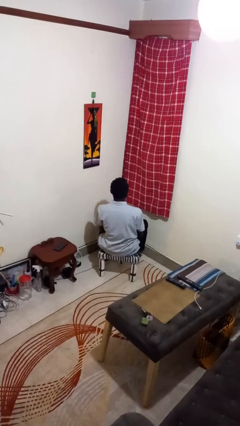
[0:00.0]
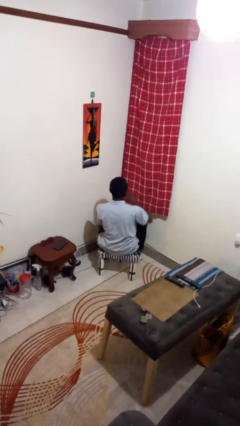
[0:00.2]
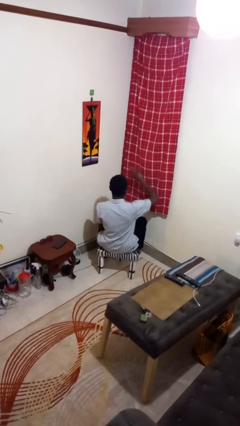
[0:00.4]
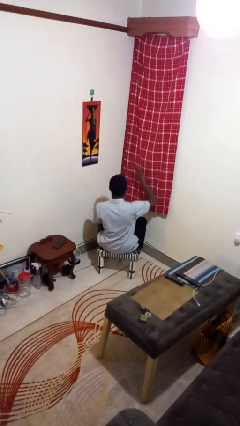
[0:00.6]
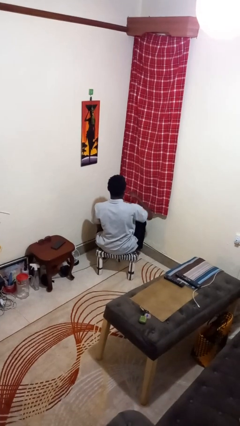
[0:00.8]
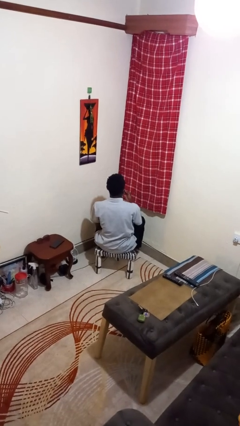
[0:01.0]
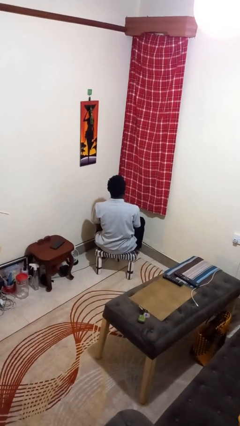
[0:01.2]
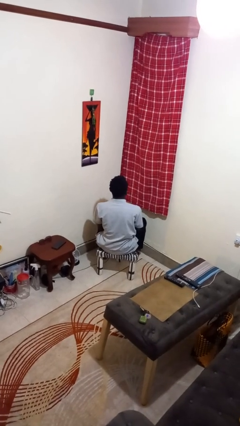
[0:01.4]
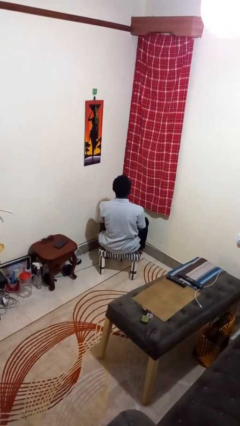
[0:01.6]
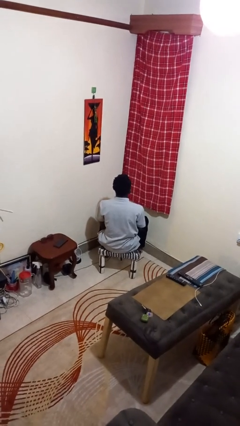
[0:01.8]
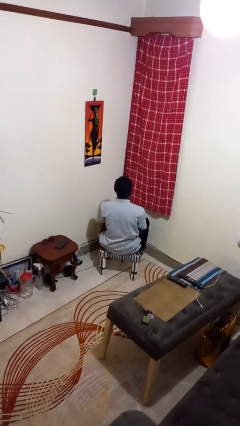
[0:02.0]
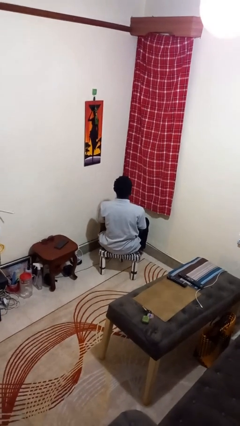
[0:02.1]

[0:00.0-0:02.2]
person gestures swipe down

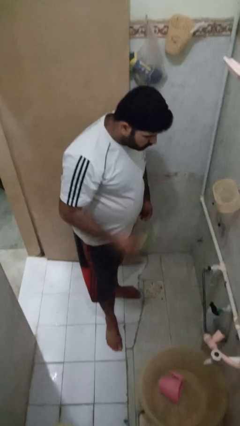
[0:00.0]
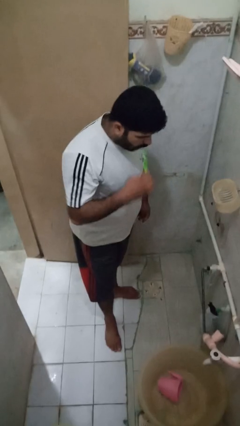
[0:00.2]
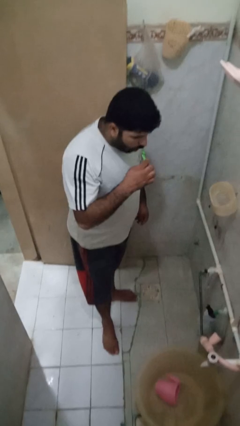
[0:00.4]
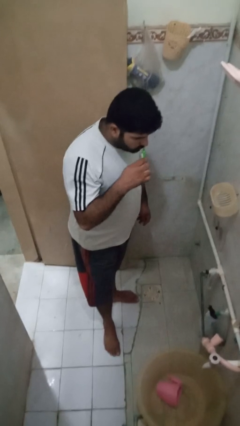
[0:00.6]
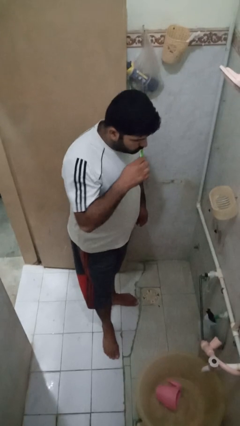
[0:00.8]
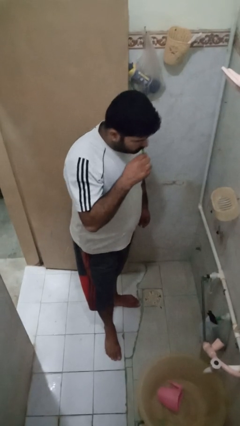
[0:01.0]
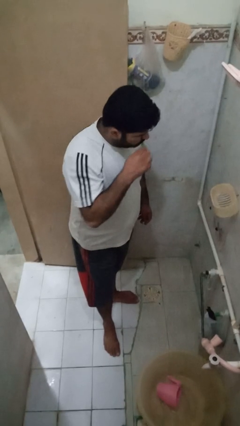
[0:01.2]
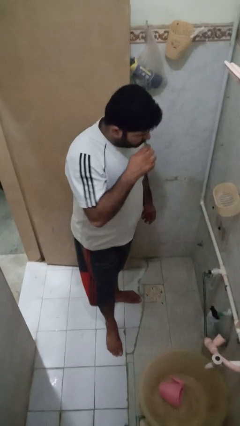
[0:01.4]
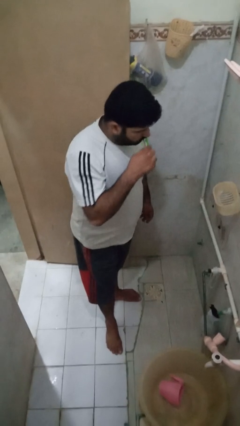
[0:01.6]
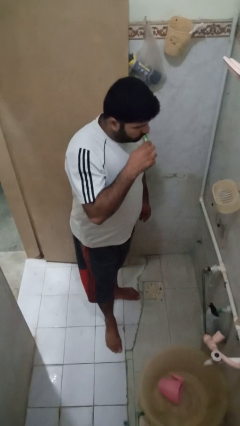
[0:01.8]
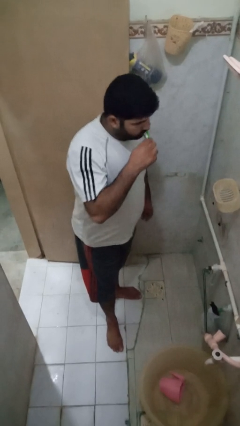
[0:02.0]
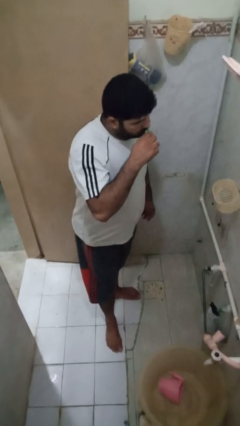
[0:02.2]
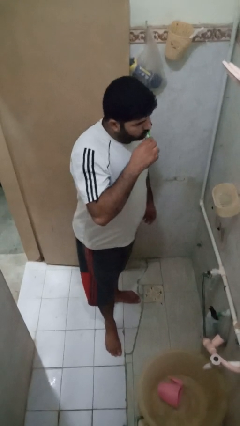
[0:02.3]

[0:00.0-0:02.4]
person brushes teeth

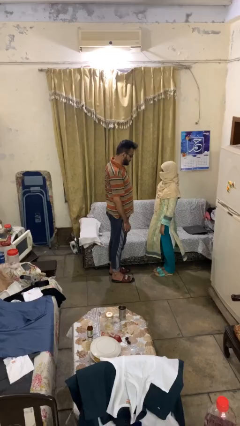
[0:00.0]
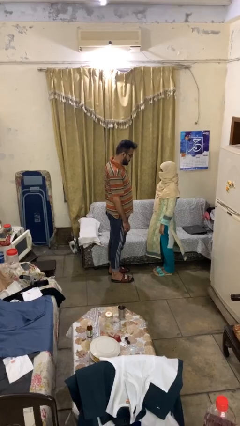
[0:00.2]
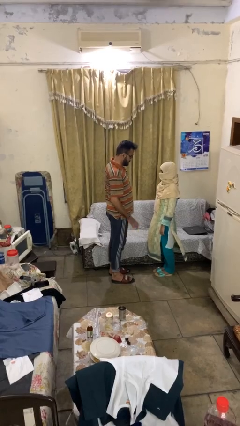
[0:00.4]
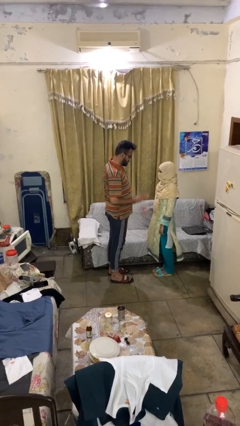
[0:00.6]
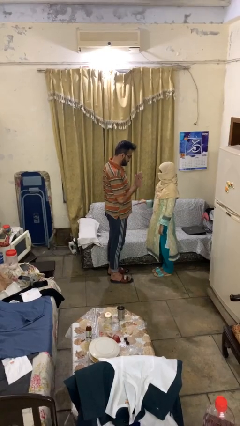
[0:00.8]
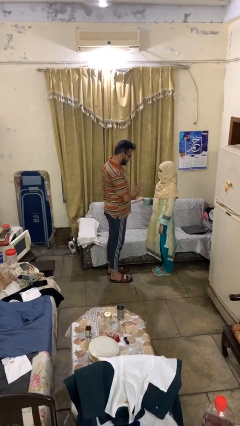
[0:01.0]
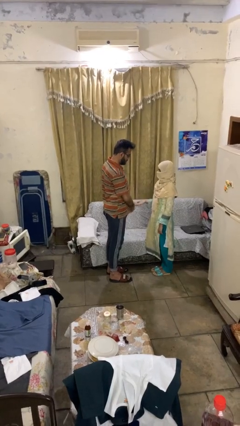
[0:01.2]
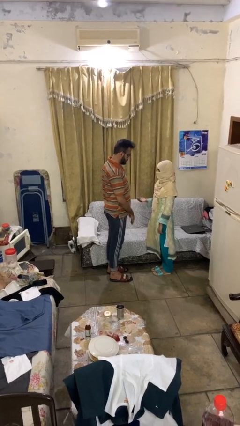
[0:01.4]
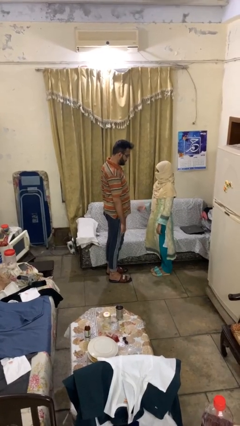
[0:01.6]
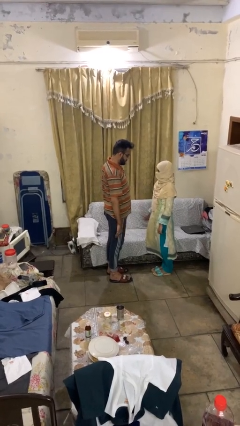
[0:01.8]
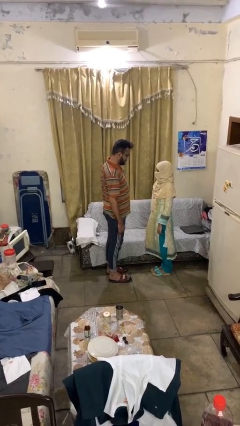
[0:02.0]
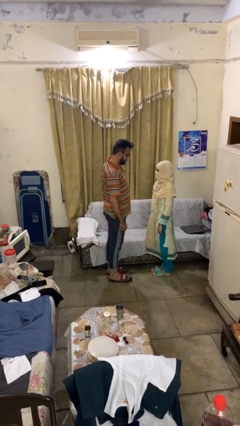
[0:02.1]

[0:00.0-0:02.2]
person highfives hand

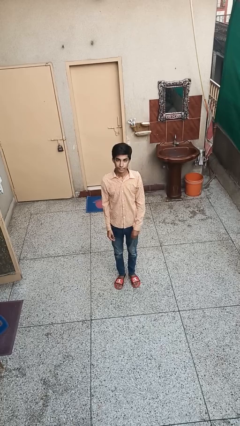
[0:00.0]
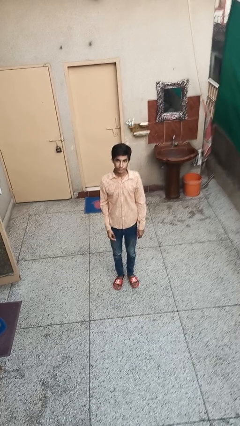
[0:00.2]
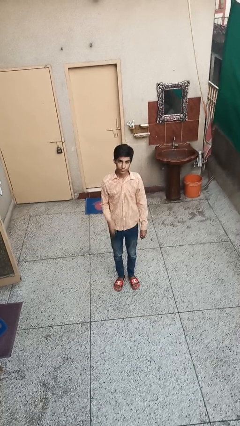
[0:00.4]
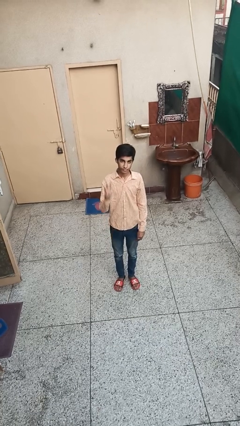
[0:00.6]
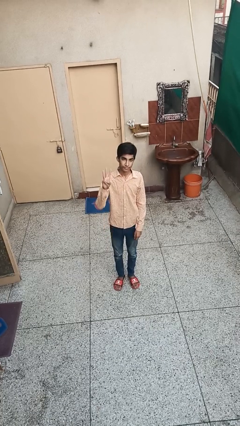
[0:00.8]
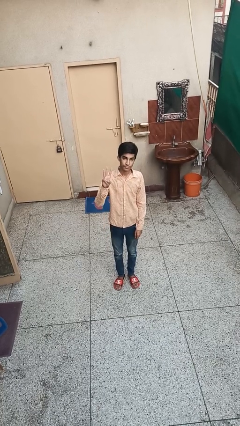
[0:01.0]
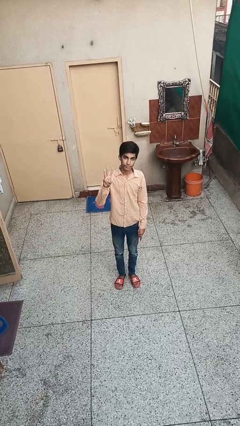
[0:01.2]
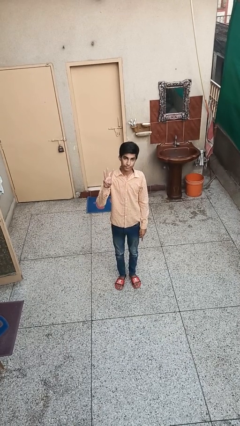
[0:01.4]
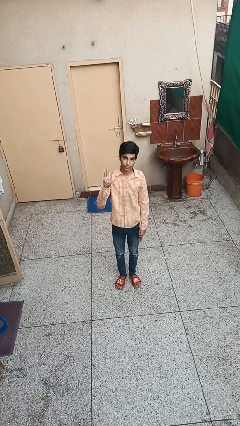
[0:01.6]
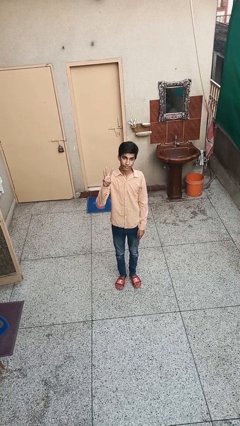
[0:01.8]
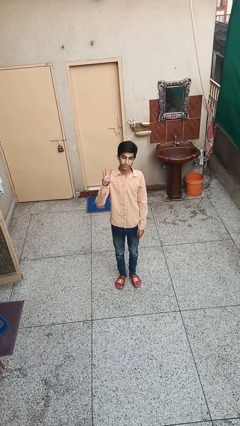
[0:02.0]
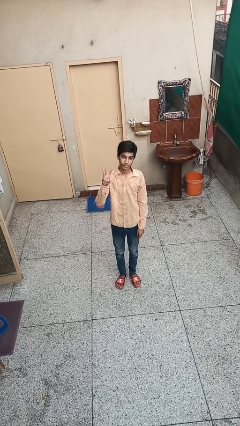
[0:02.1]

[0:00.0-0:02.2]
person gestures number three

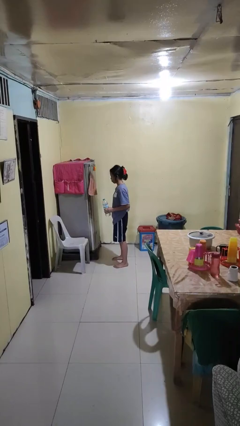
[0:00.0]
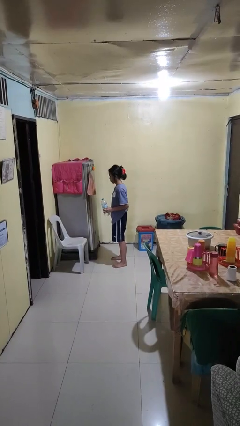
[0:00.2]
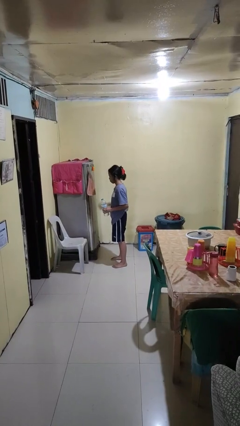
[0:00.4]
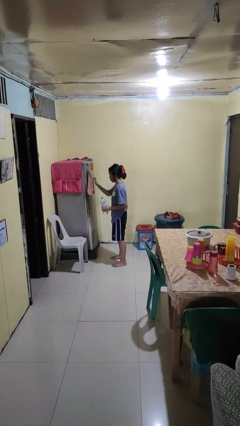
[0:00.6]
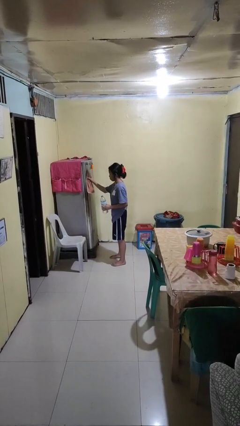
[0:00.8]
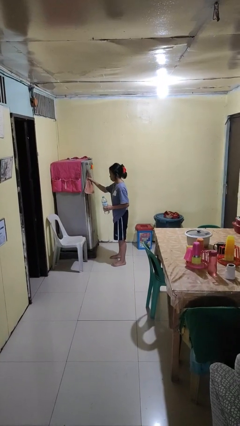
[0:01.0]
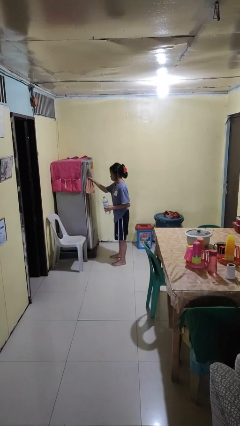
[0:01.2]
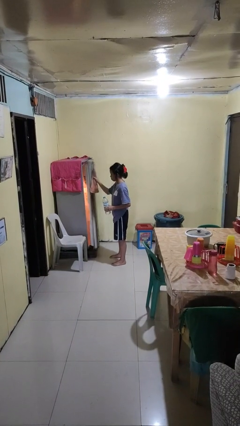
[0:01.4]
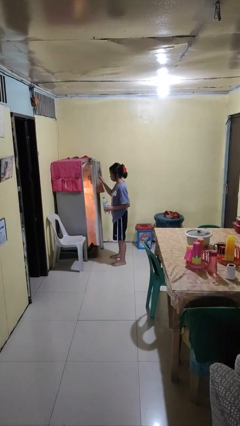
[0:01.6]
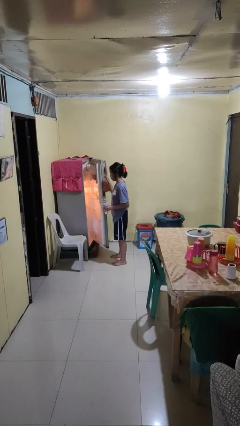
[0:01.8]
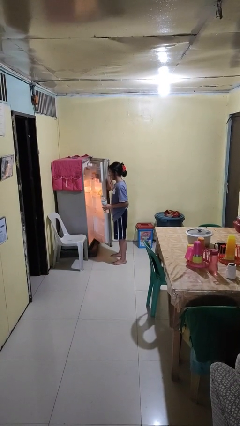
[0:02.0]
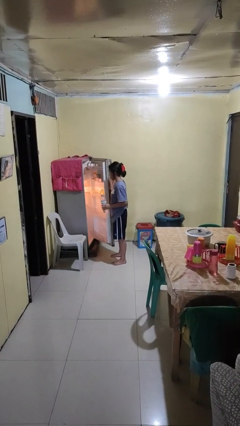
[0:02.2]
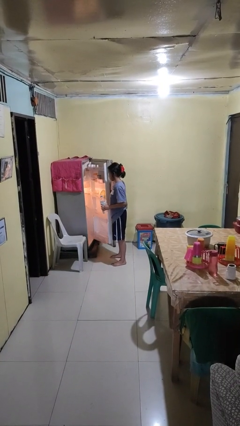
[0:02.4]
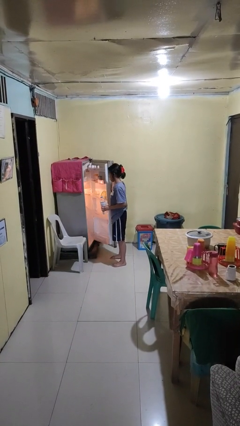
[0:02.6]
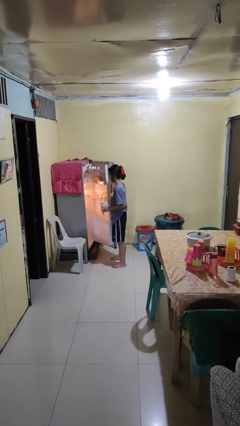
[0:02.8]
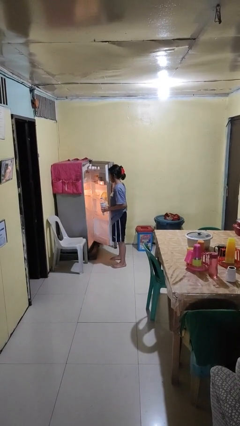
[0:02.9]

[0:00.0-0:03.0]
person opens refrigerator

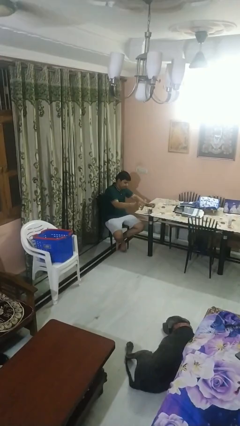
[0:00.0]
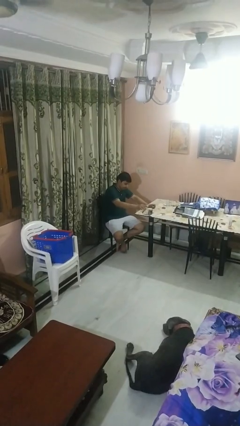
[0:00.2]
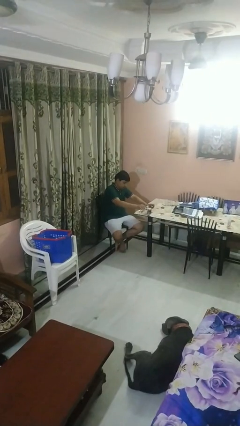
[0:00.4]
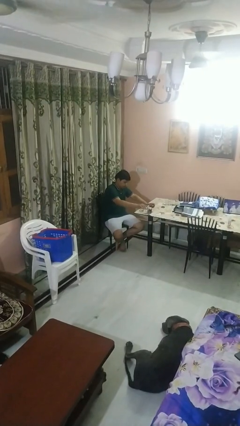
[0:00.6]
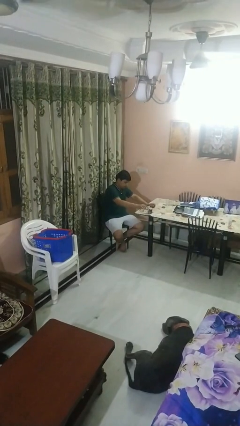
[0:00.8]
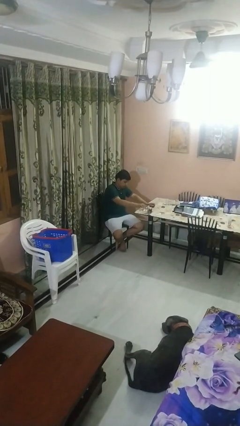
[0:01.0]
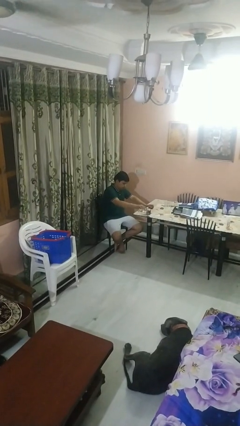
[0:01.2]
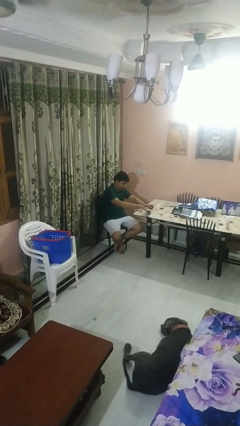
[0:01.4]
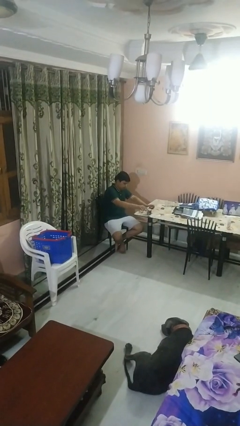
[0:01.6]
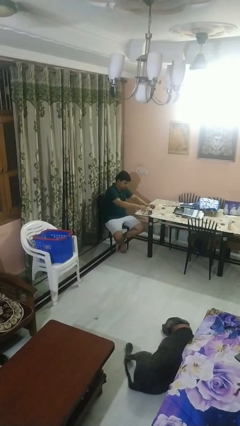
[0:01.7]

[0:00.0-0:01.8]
person pours liquid into cup

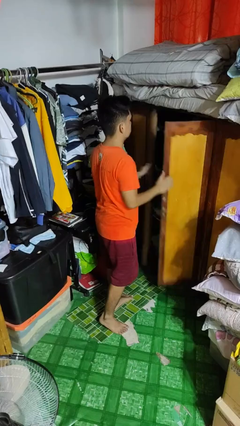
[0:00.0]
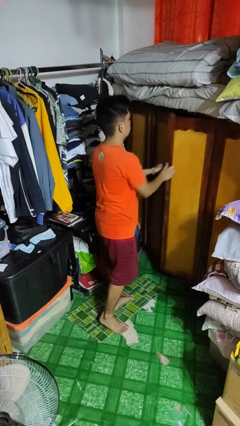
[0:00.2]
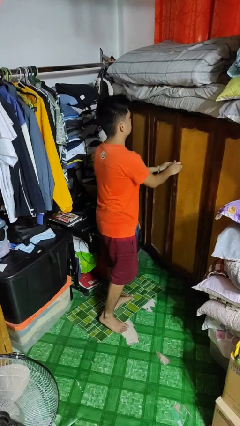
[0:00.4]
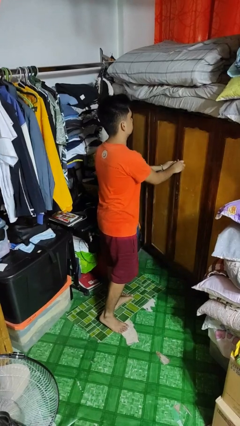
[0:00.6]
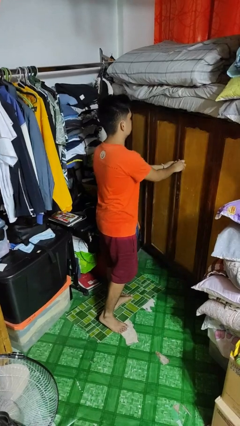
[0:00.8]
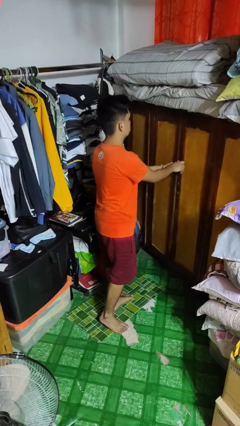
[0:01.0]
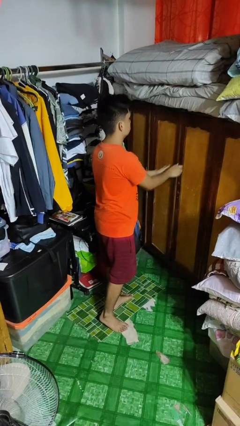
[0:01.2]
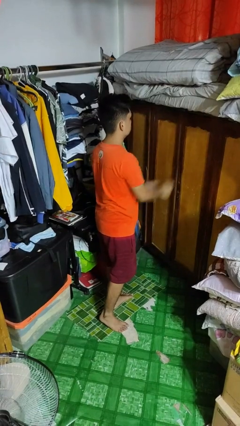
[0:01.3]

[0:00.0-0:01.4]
person closes closet door

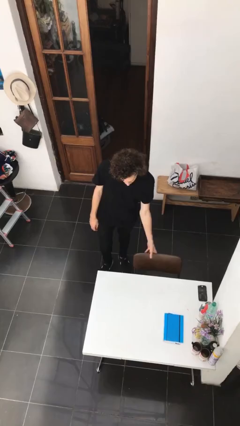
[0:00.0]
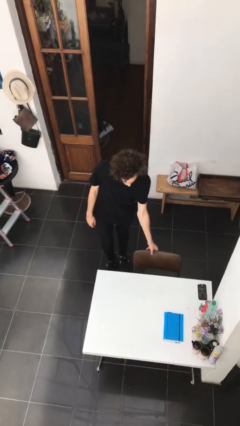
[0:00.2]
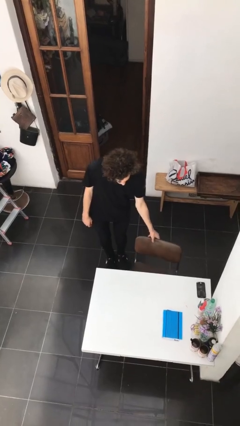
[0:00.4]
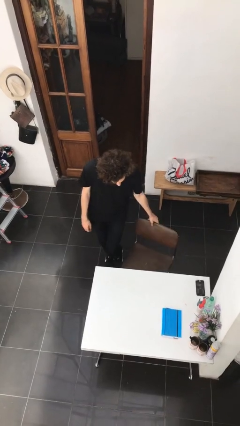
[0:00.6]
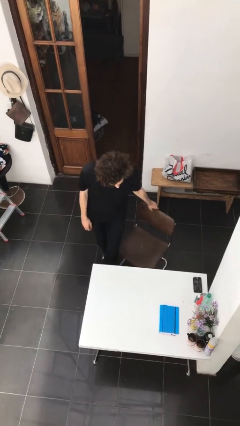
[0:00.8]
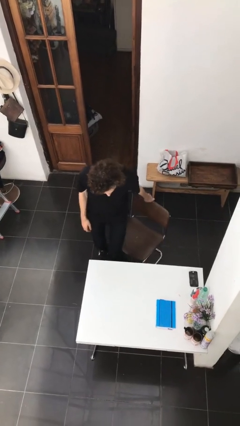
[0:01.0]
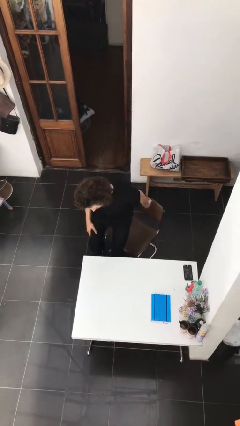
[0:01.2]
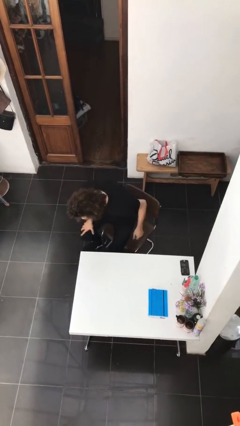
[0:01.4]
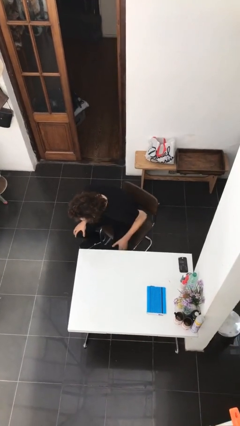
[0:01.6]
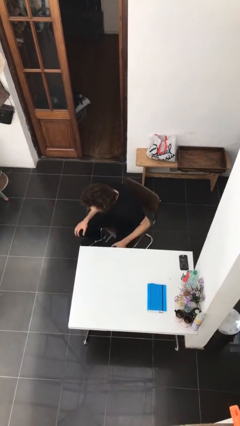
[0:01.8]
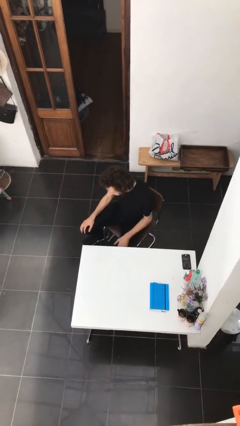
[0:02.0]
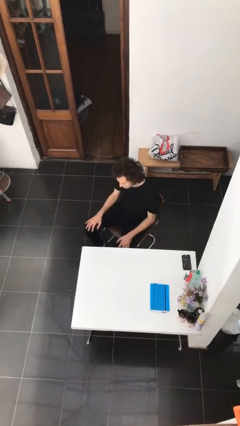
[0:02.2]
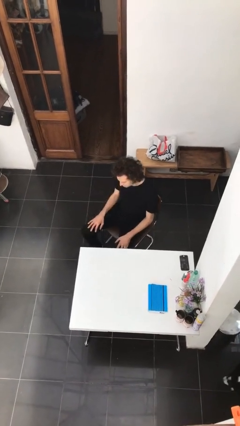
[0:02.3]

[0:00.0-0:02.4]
person sits down
